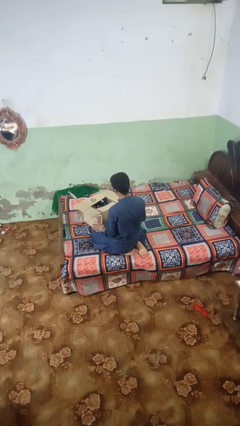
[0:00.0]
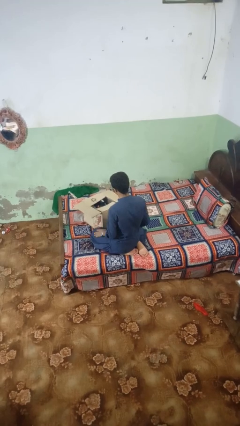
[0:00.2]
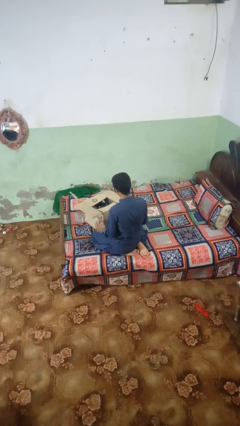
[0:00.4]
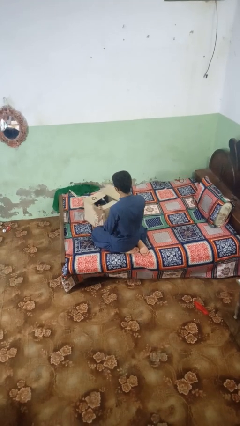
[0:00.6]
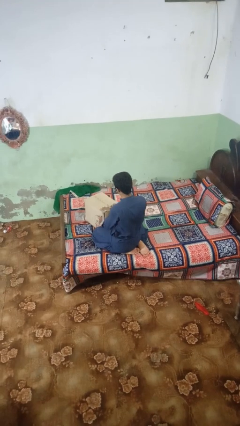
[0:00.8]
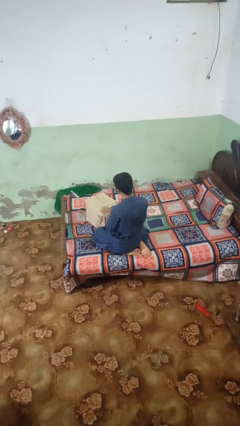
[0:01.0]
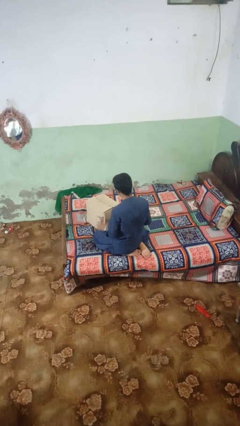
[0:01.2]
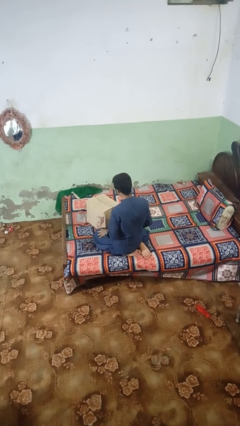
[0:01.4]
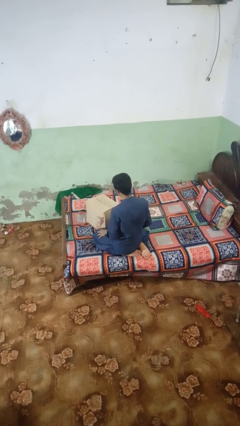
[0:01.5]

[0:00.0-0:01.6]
person closes box

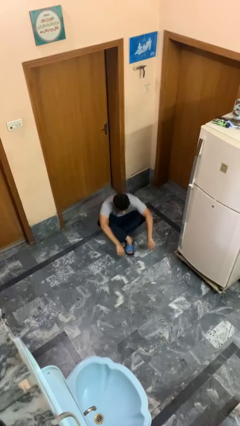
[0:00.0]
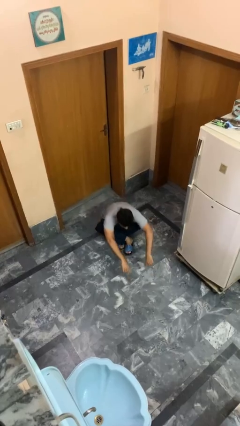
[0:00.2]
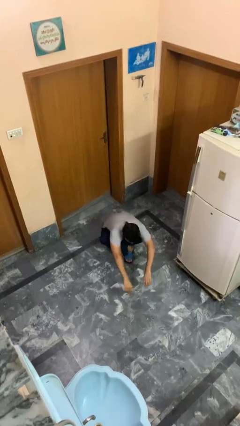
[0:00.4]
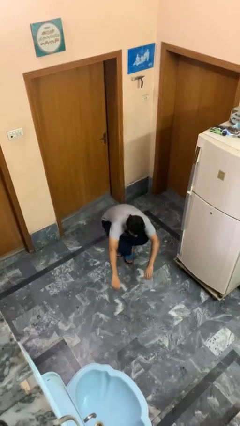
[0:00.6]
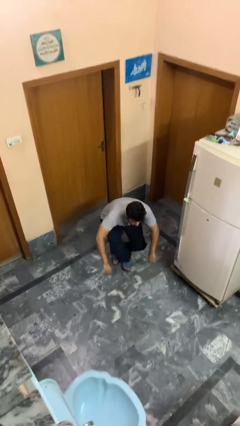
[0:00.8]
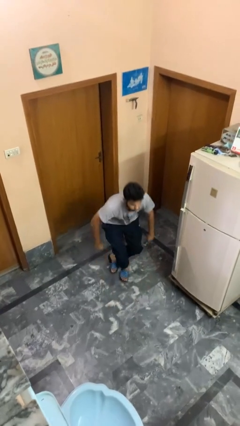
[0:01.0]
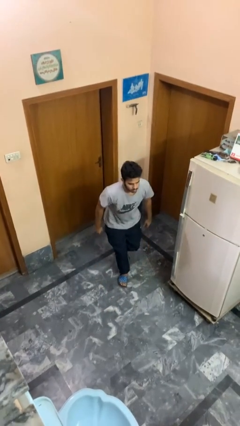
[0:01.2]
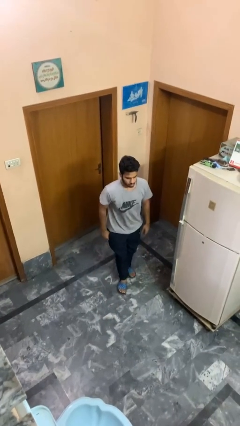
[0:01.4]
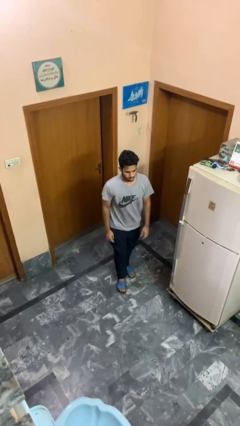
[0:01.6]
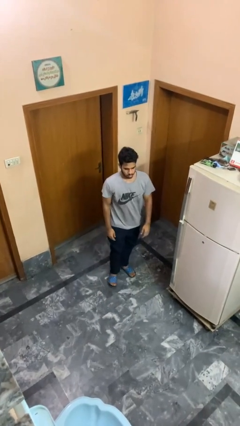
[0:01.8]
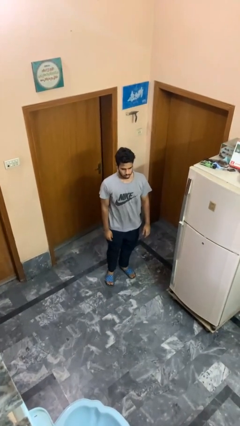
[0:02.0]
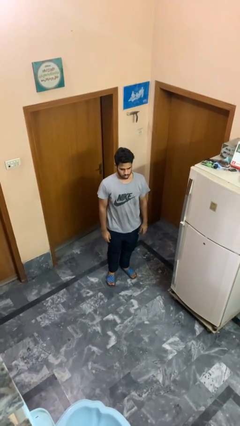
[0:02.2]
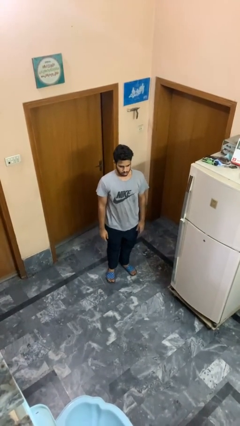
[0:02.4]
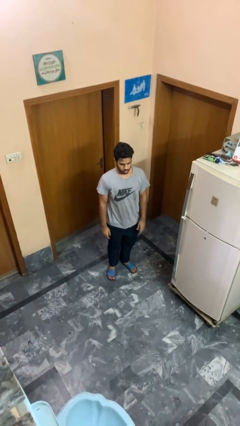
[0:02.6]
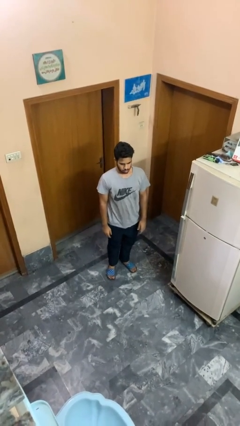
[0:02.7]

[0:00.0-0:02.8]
person stands up from floor

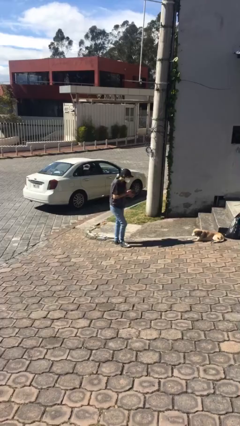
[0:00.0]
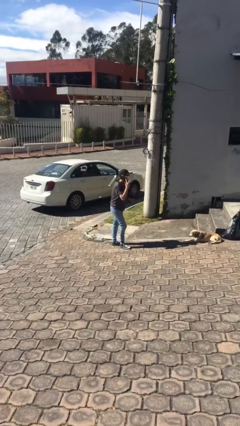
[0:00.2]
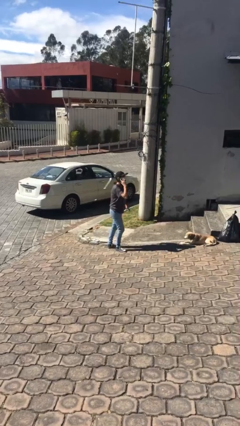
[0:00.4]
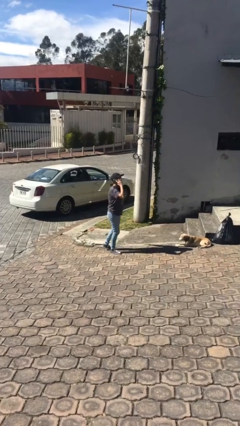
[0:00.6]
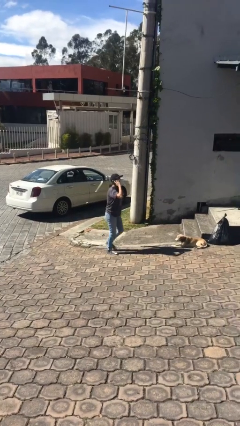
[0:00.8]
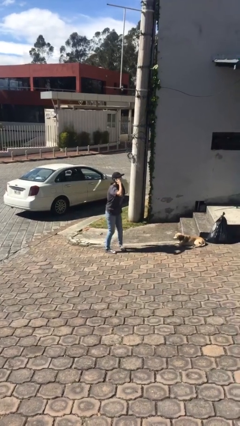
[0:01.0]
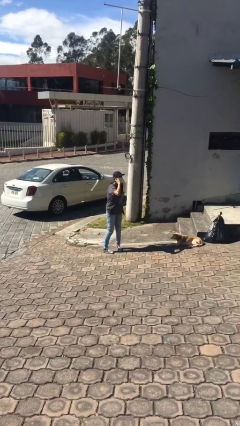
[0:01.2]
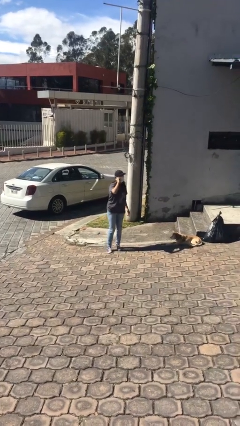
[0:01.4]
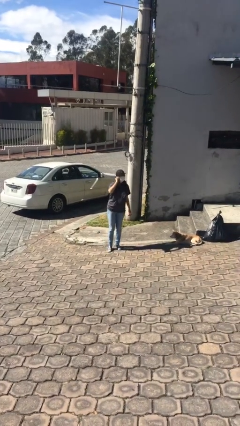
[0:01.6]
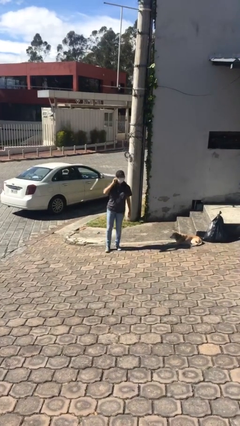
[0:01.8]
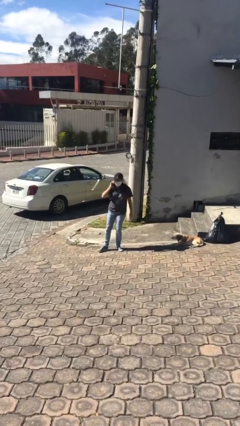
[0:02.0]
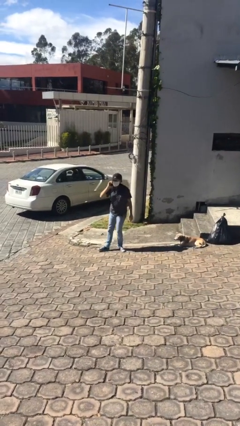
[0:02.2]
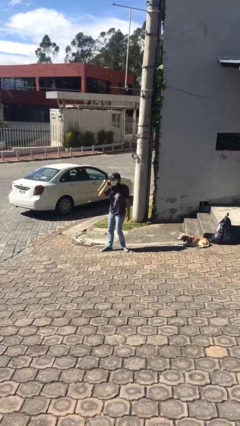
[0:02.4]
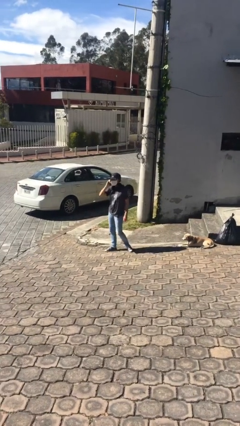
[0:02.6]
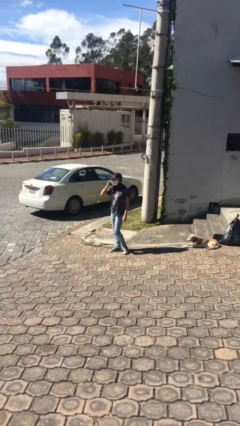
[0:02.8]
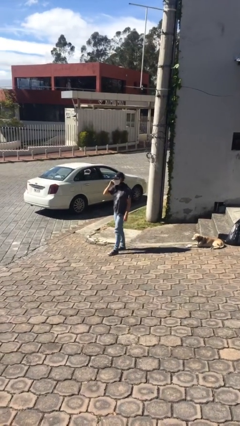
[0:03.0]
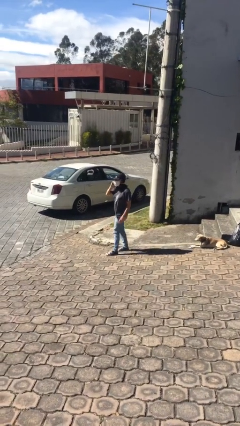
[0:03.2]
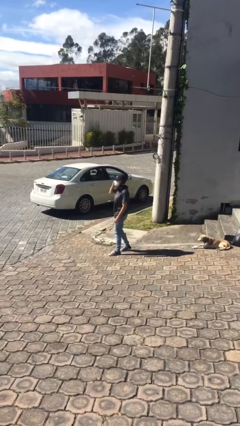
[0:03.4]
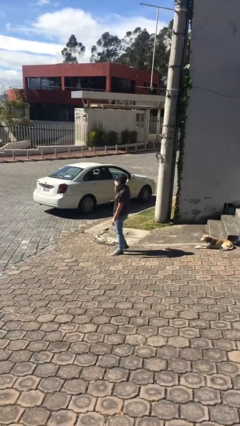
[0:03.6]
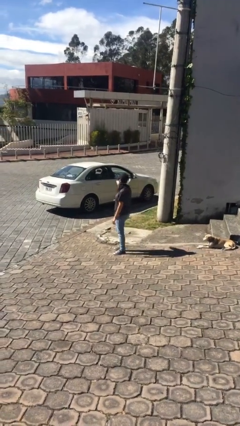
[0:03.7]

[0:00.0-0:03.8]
person talks on phone

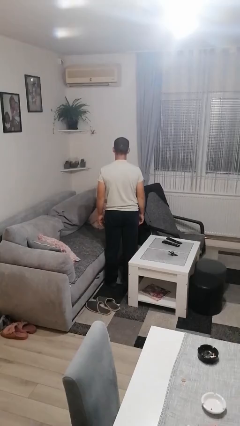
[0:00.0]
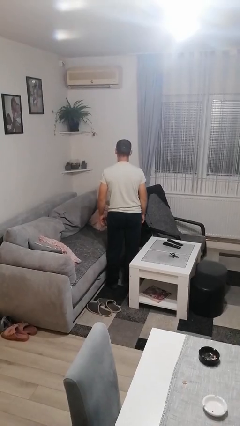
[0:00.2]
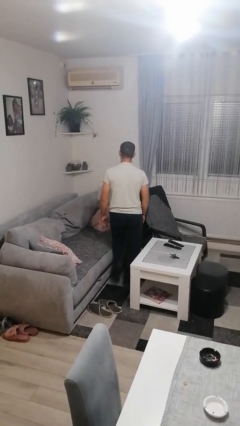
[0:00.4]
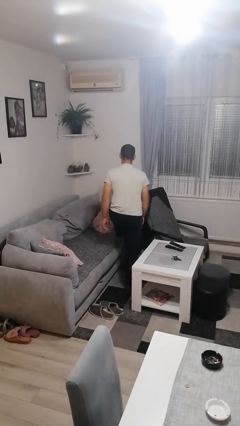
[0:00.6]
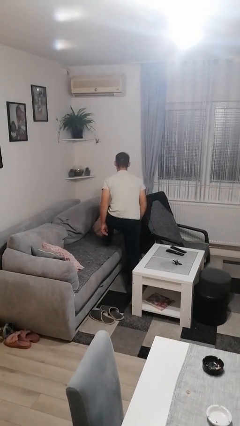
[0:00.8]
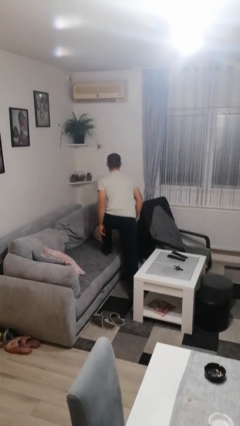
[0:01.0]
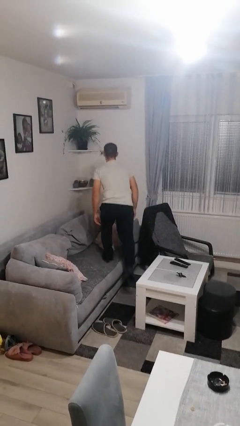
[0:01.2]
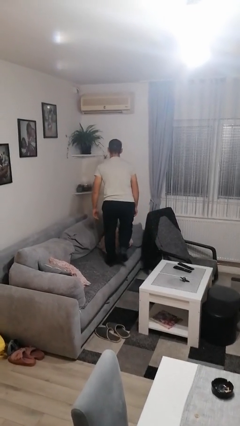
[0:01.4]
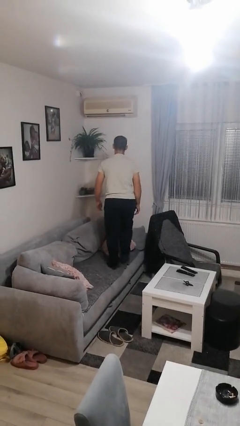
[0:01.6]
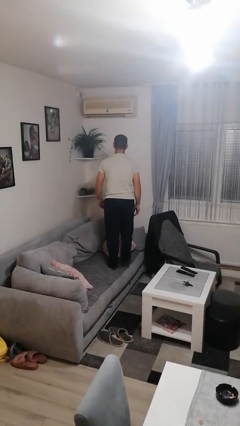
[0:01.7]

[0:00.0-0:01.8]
person climbs on couch

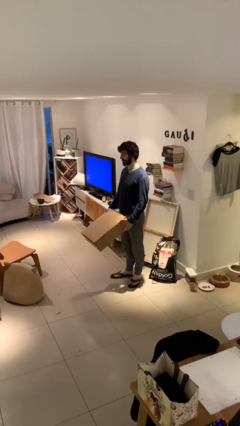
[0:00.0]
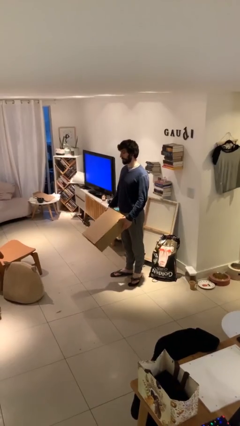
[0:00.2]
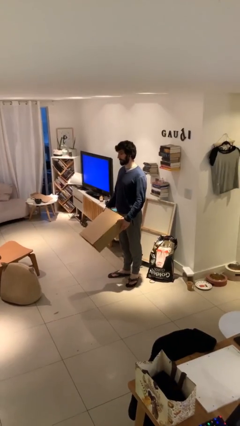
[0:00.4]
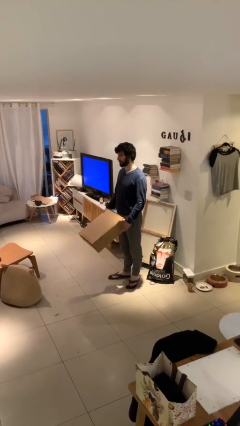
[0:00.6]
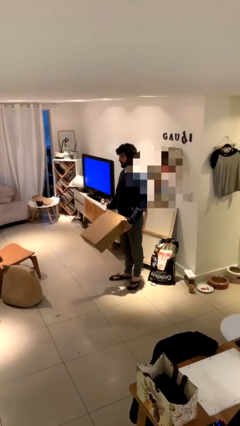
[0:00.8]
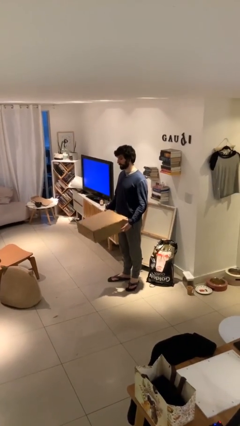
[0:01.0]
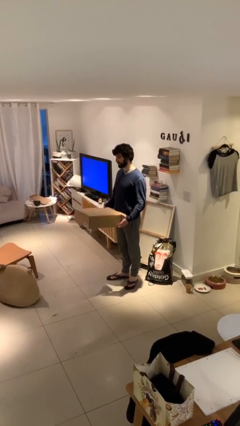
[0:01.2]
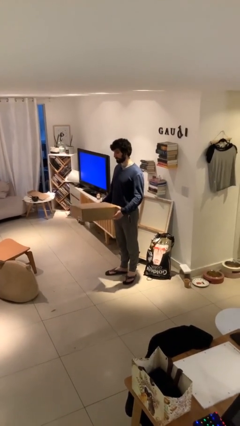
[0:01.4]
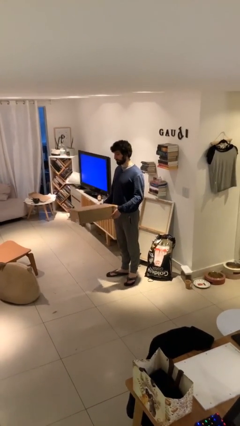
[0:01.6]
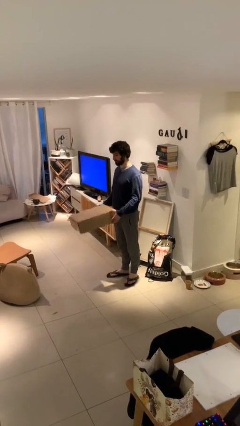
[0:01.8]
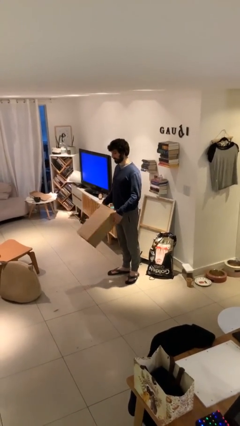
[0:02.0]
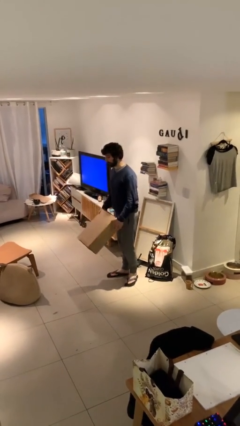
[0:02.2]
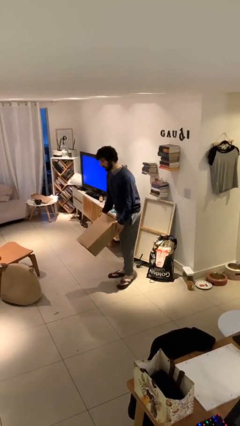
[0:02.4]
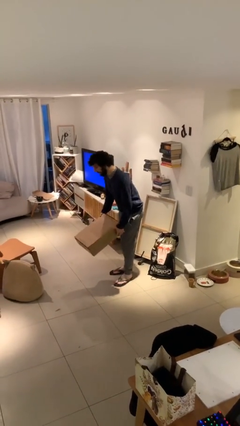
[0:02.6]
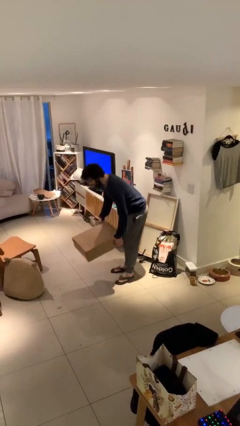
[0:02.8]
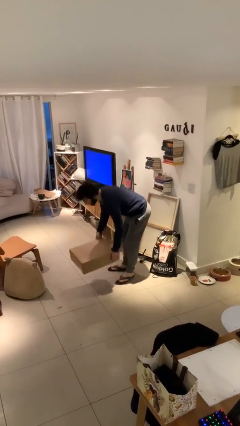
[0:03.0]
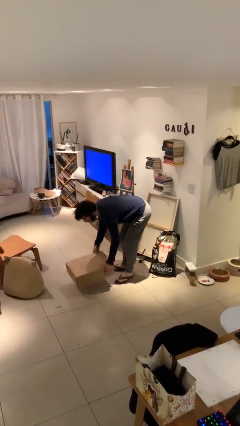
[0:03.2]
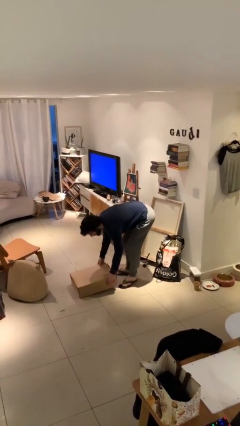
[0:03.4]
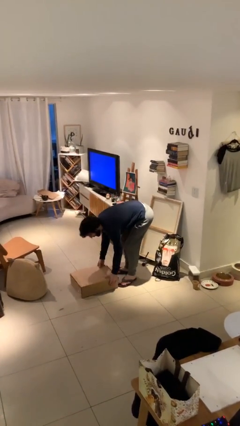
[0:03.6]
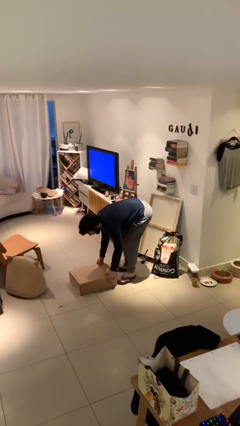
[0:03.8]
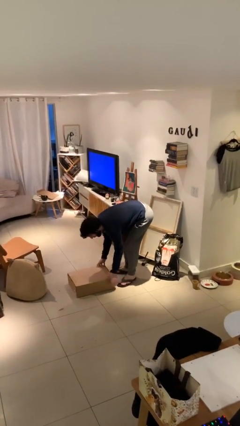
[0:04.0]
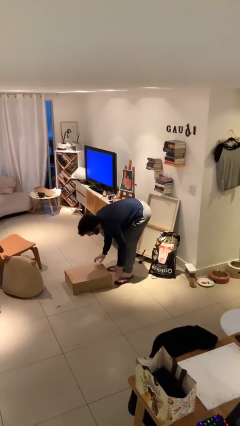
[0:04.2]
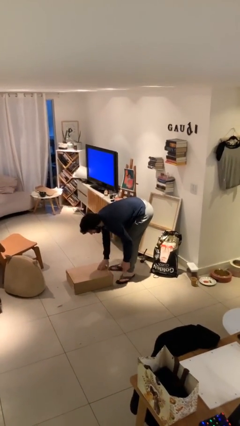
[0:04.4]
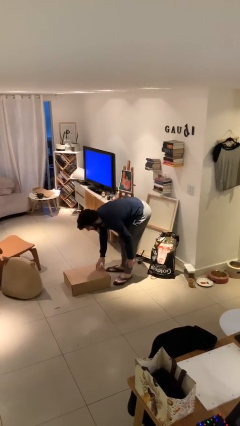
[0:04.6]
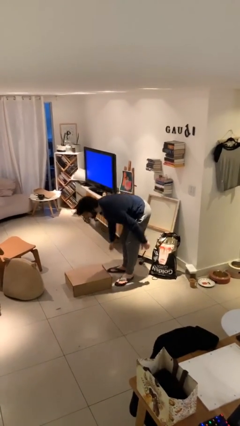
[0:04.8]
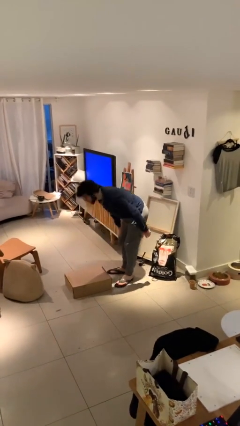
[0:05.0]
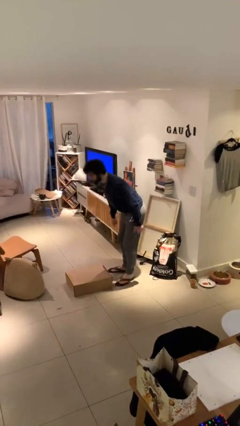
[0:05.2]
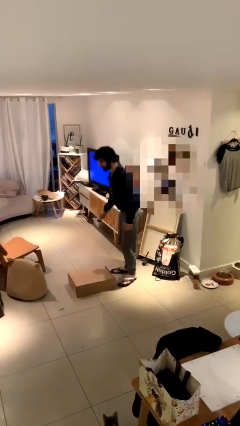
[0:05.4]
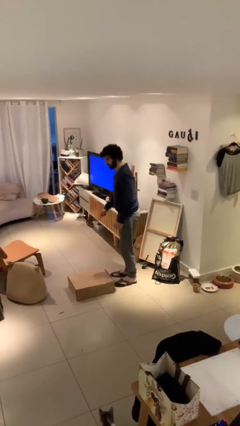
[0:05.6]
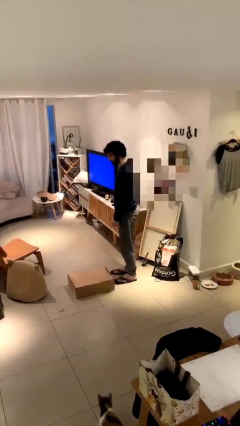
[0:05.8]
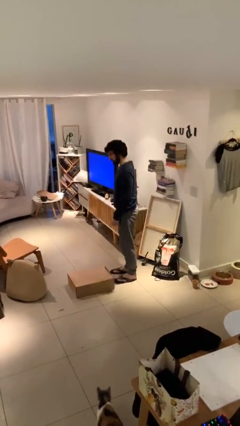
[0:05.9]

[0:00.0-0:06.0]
person puts down object on floor

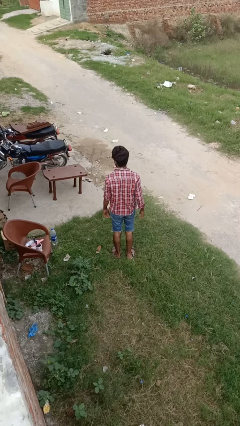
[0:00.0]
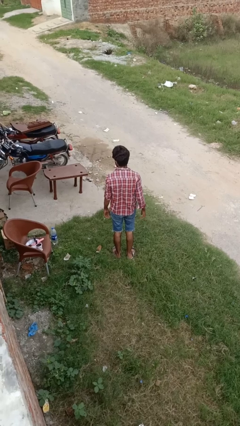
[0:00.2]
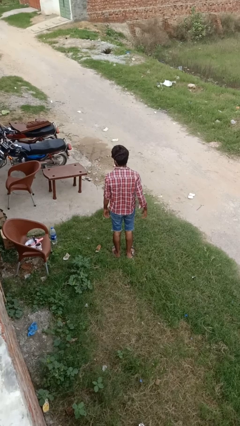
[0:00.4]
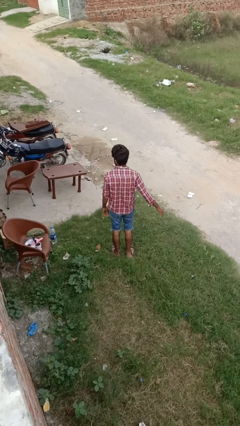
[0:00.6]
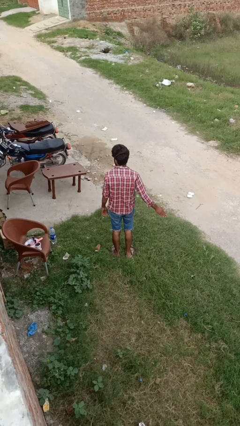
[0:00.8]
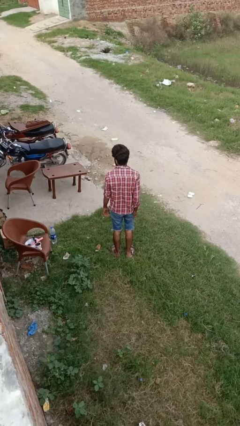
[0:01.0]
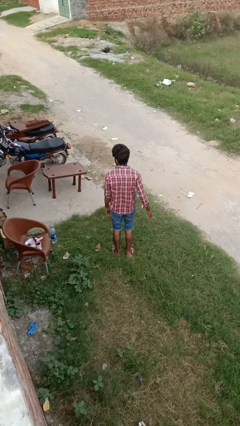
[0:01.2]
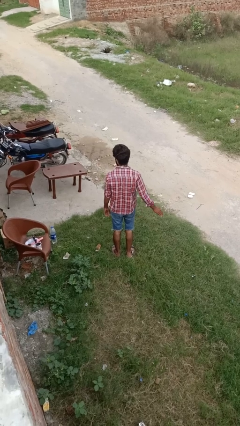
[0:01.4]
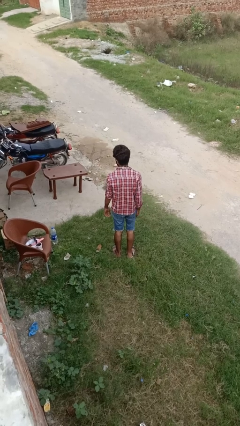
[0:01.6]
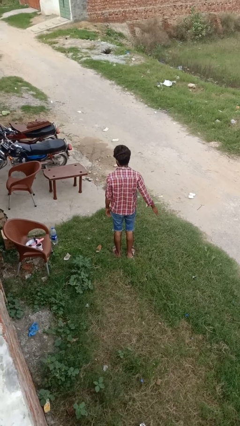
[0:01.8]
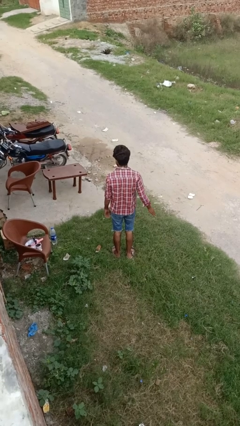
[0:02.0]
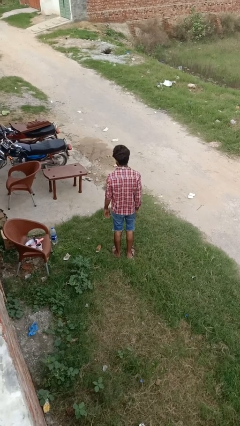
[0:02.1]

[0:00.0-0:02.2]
person snaps fingers
